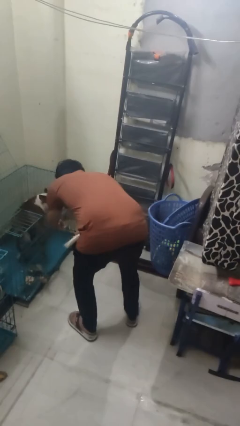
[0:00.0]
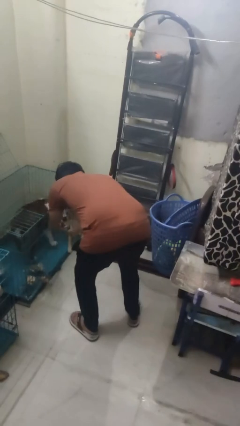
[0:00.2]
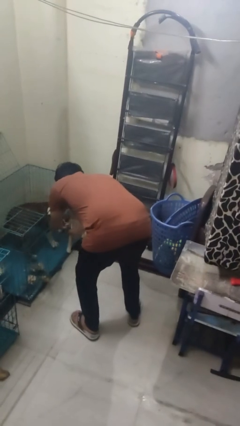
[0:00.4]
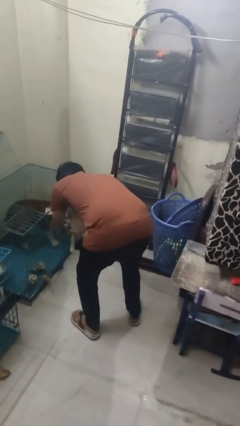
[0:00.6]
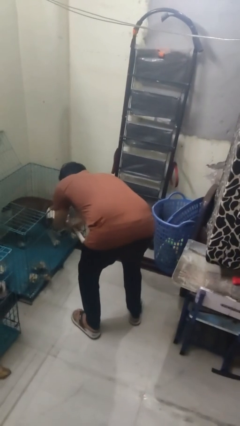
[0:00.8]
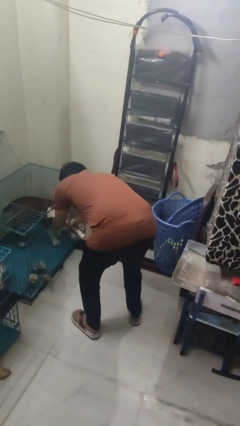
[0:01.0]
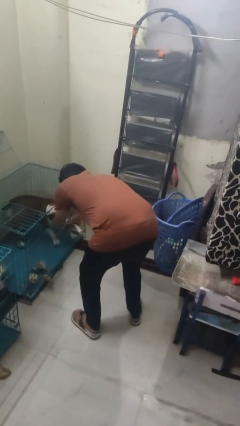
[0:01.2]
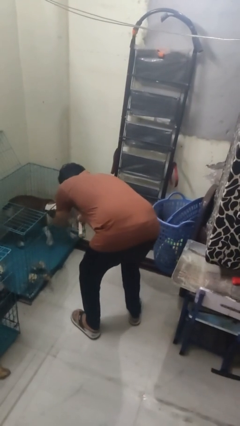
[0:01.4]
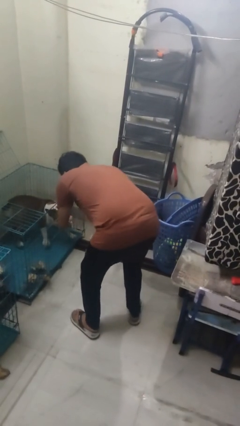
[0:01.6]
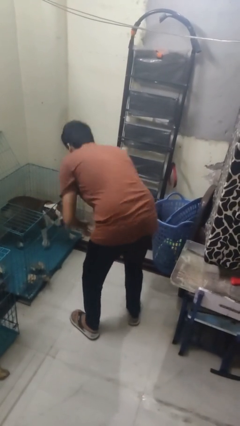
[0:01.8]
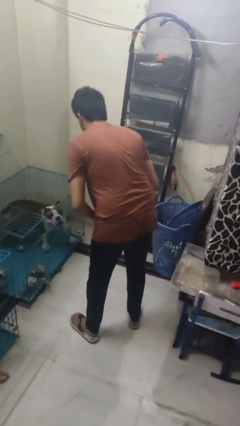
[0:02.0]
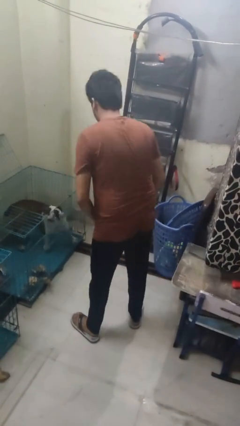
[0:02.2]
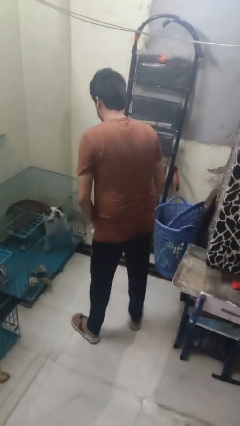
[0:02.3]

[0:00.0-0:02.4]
person crates dog

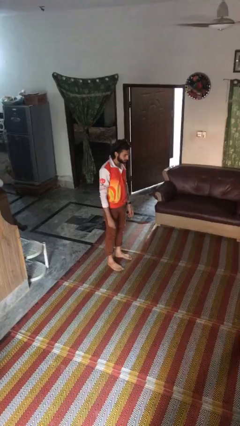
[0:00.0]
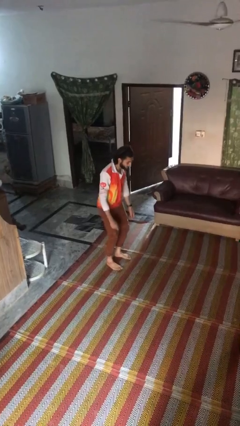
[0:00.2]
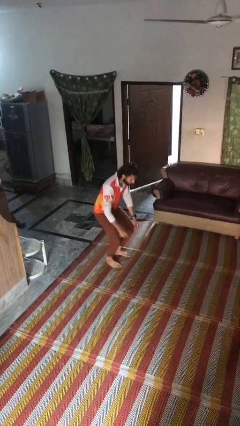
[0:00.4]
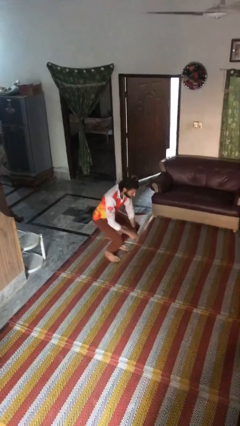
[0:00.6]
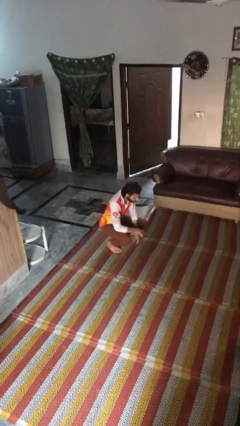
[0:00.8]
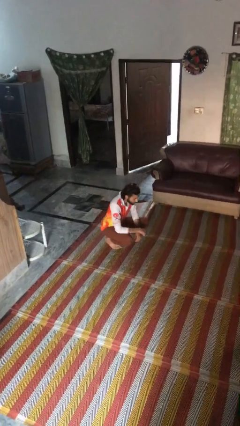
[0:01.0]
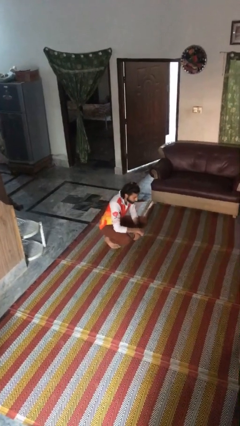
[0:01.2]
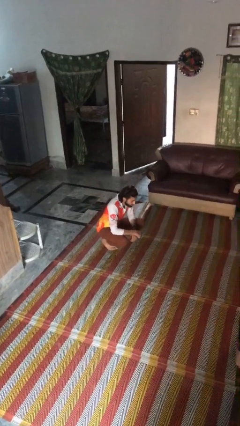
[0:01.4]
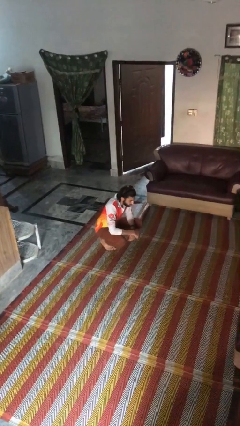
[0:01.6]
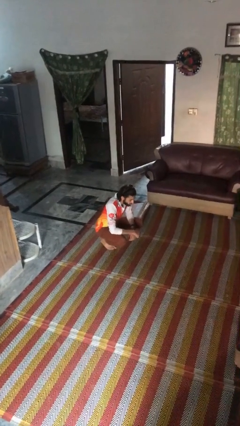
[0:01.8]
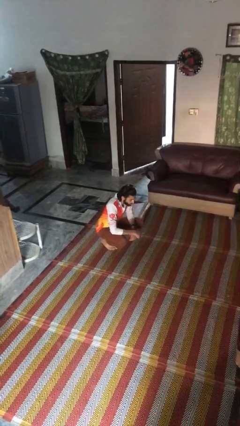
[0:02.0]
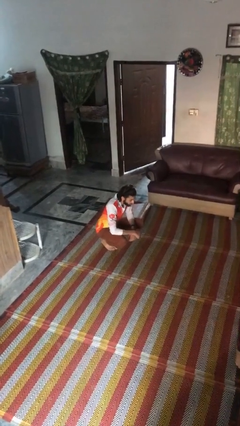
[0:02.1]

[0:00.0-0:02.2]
person squats

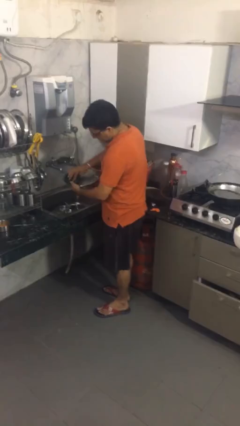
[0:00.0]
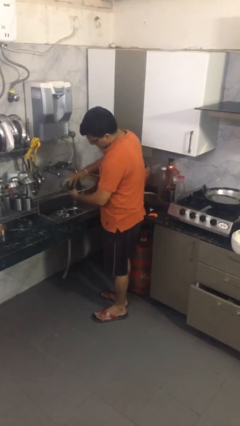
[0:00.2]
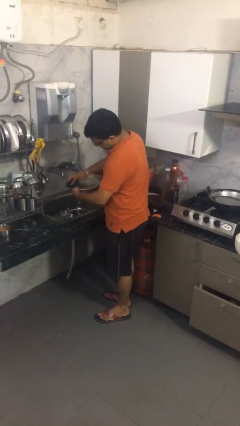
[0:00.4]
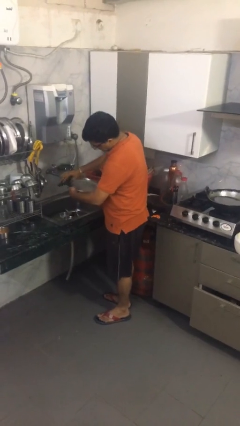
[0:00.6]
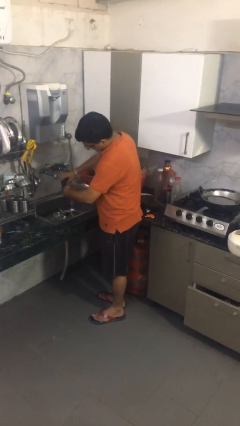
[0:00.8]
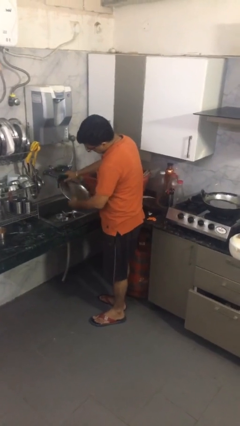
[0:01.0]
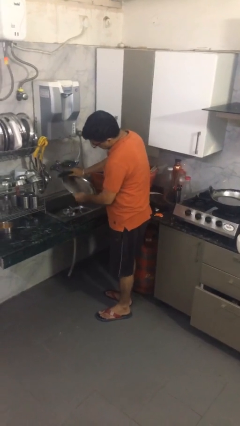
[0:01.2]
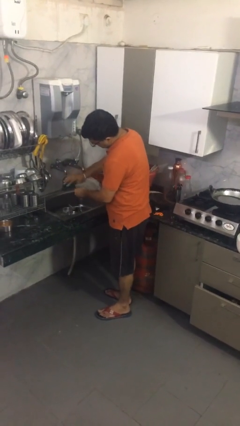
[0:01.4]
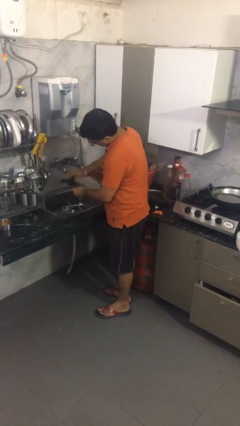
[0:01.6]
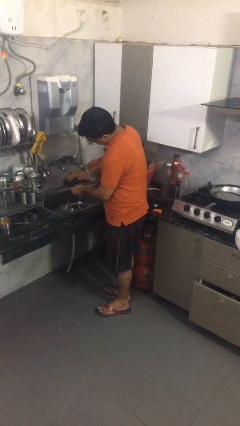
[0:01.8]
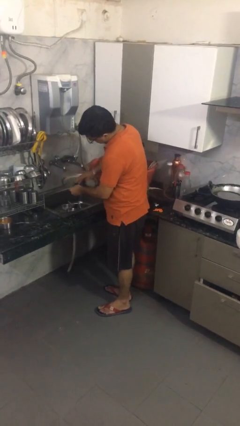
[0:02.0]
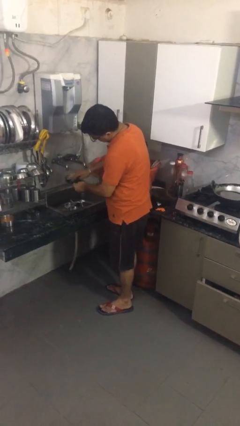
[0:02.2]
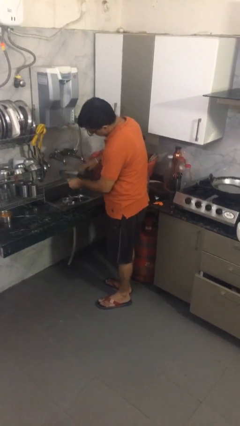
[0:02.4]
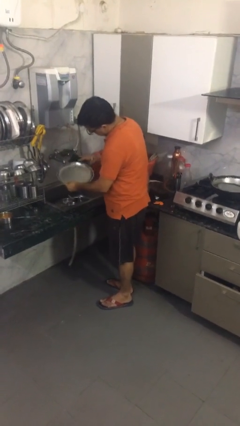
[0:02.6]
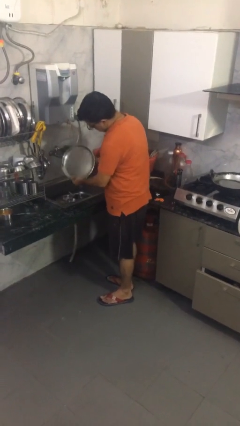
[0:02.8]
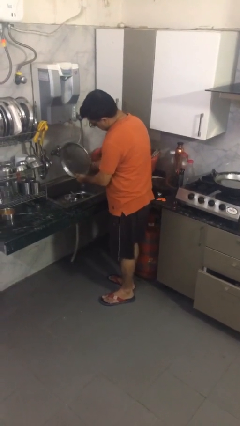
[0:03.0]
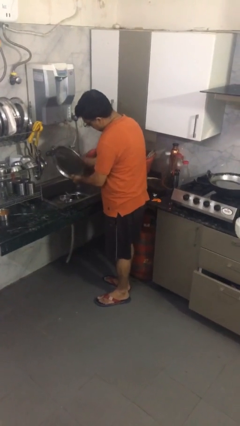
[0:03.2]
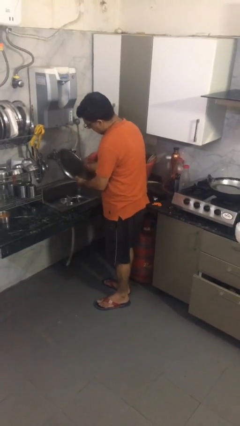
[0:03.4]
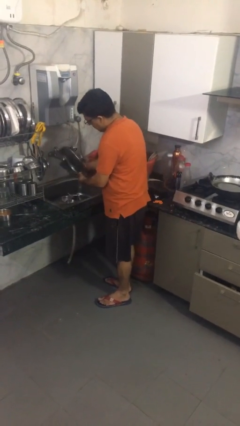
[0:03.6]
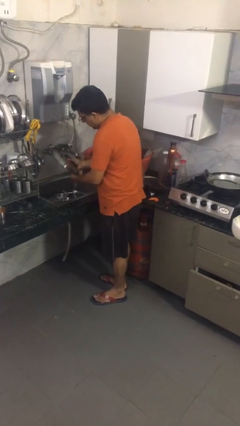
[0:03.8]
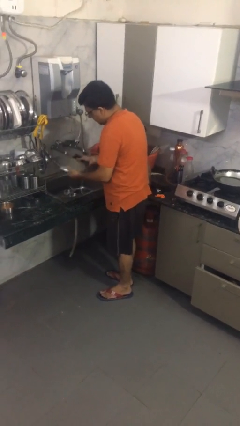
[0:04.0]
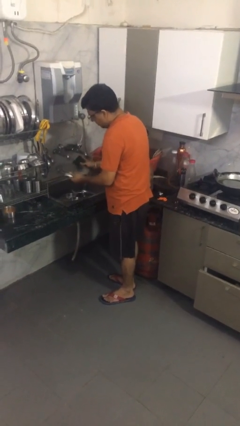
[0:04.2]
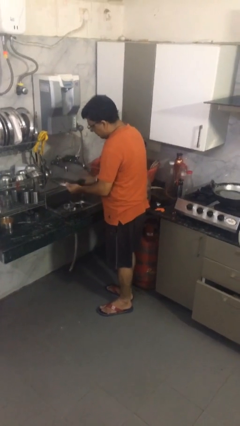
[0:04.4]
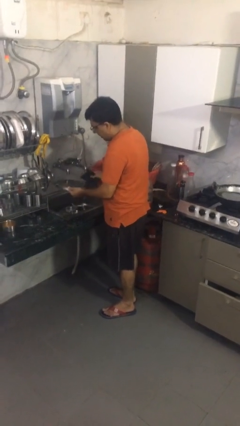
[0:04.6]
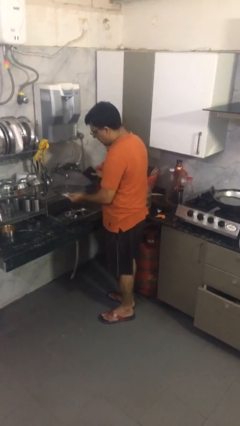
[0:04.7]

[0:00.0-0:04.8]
person washes dish

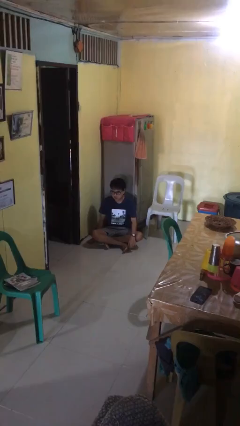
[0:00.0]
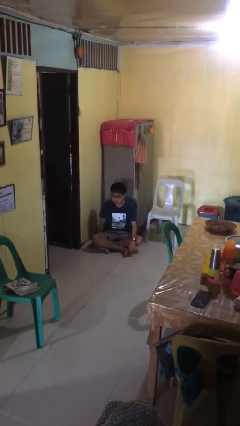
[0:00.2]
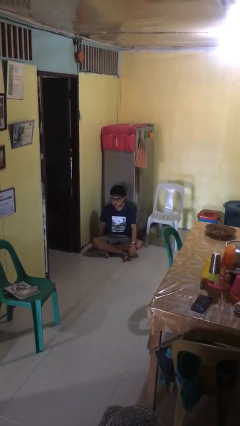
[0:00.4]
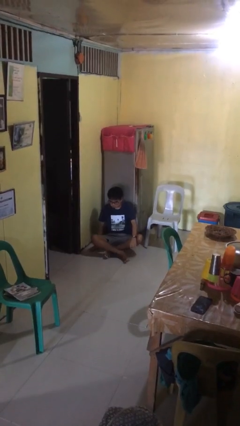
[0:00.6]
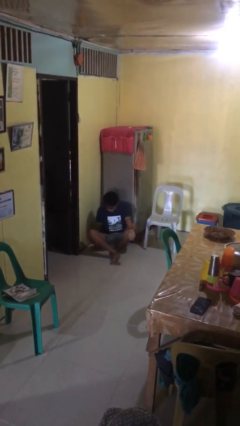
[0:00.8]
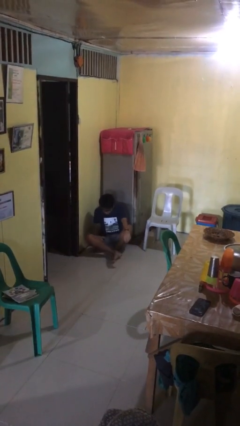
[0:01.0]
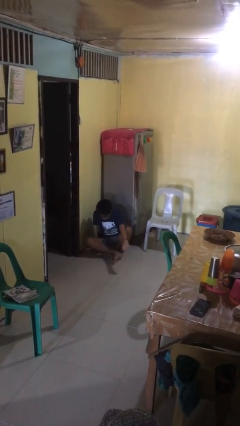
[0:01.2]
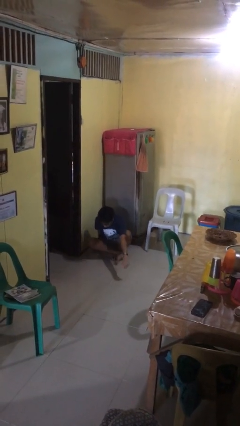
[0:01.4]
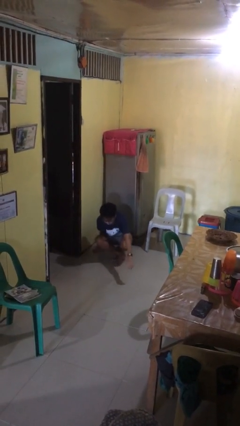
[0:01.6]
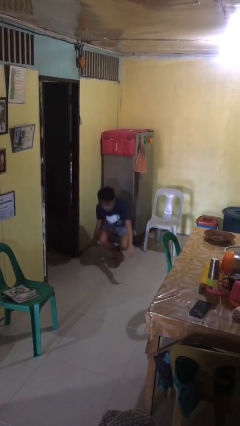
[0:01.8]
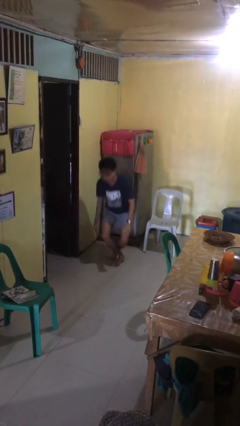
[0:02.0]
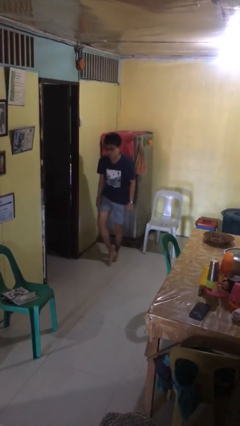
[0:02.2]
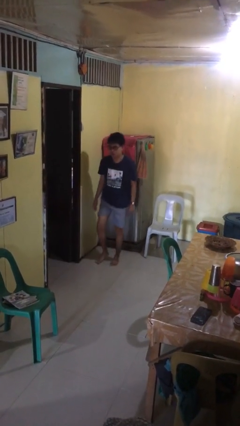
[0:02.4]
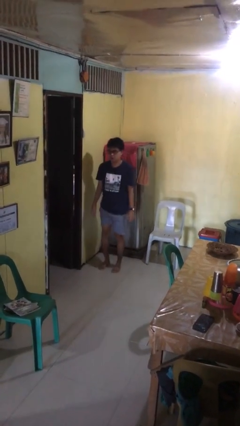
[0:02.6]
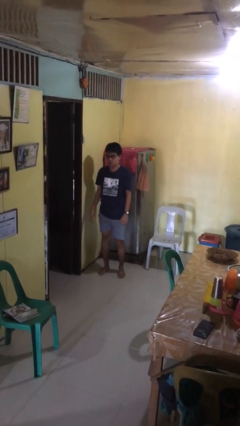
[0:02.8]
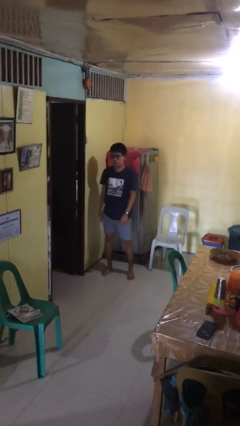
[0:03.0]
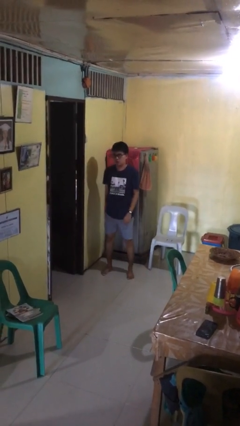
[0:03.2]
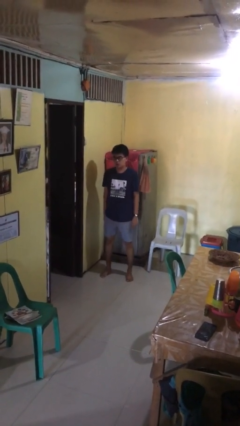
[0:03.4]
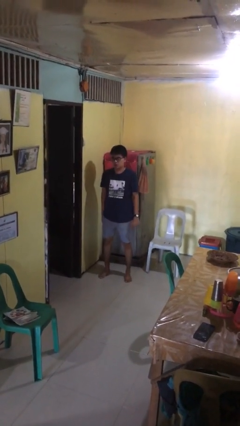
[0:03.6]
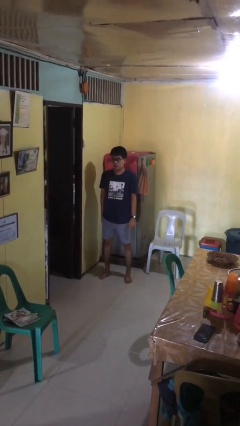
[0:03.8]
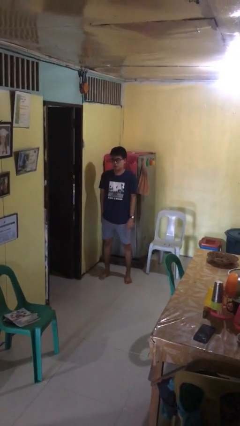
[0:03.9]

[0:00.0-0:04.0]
person stands up from floor

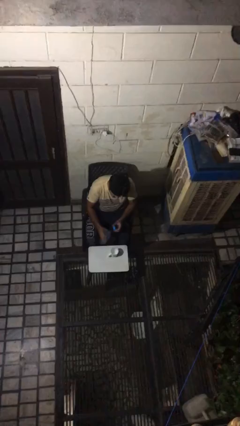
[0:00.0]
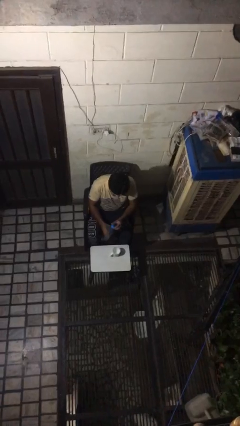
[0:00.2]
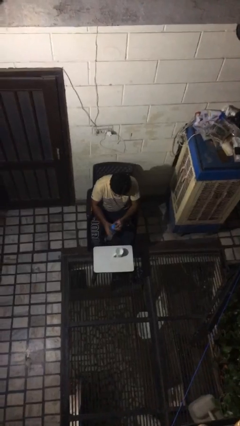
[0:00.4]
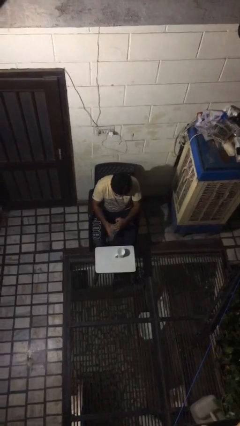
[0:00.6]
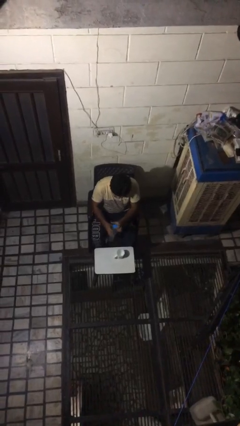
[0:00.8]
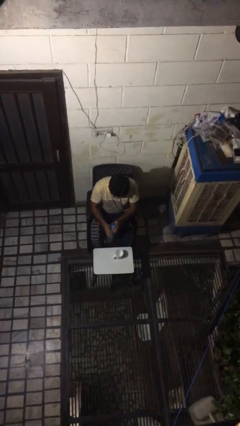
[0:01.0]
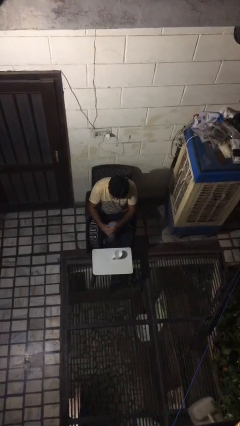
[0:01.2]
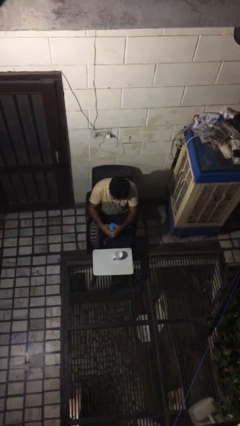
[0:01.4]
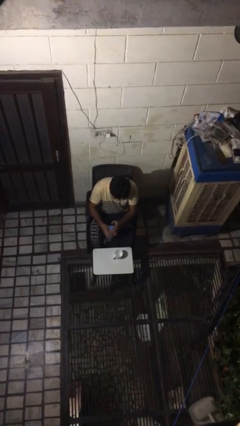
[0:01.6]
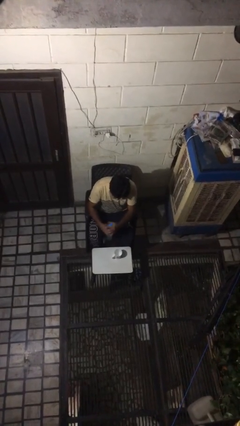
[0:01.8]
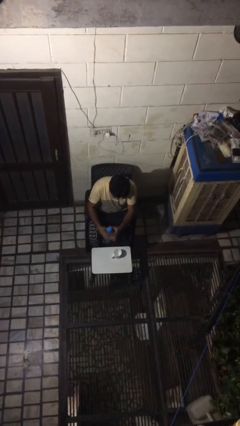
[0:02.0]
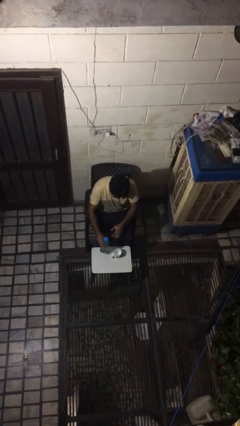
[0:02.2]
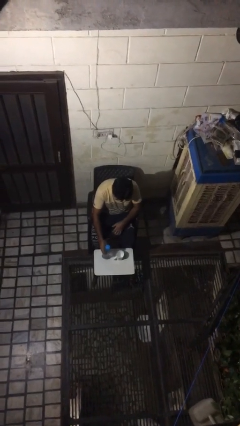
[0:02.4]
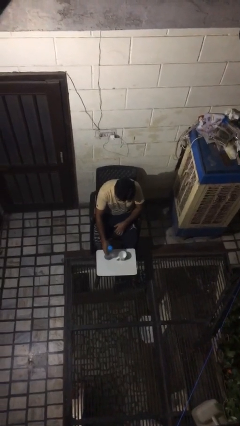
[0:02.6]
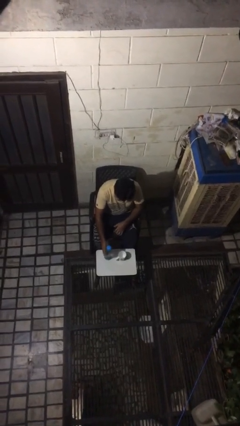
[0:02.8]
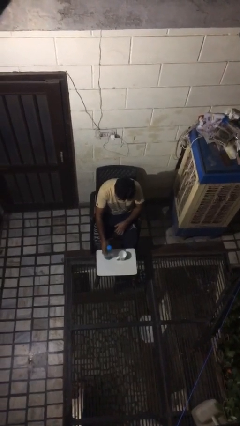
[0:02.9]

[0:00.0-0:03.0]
person screws lid to bottle

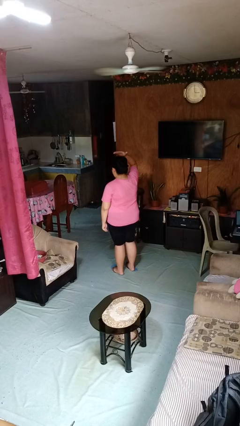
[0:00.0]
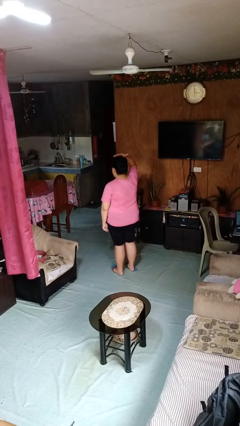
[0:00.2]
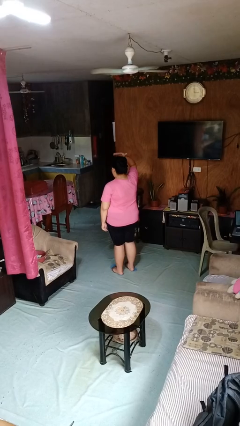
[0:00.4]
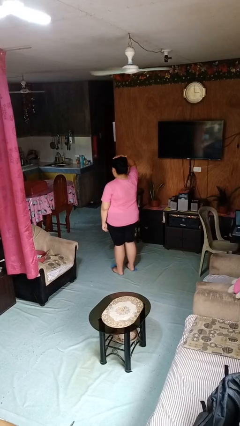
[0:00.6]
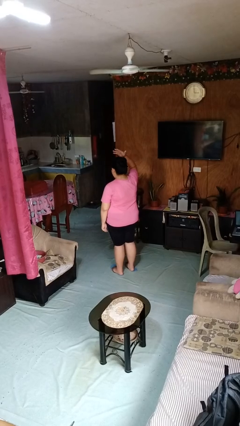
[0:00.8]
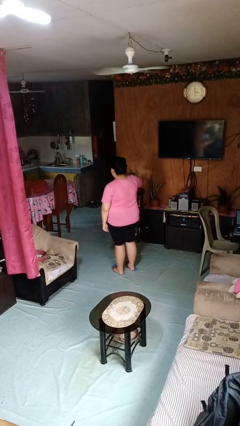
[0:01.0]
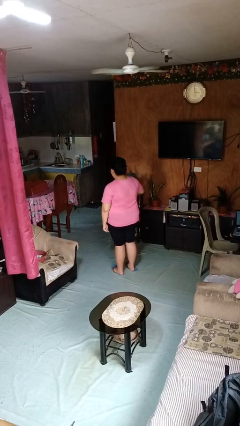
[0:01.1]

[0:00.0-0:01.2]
person pats head
